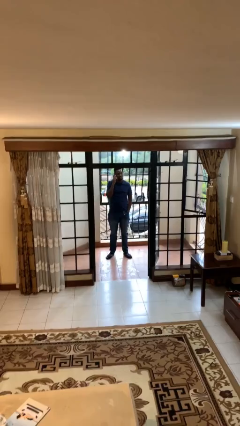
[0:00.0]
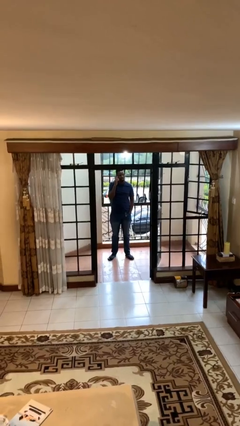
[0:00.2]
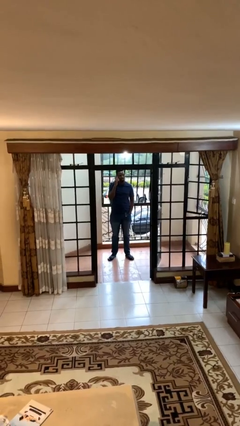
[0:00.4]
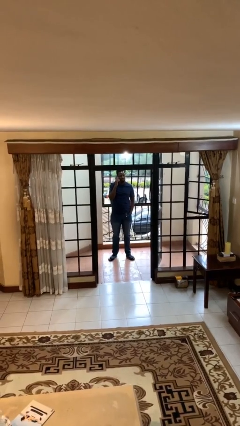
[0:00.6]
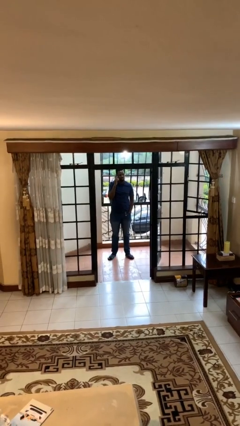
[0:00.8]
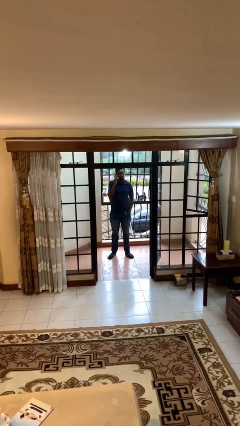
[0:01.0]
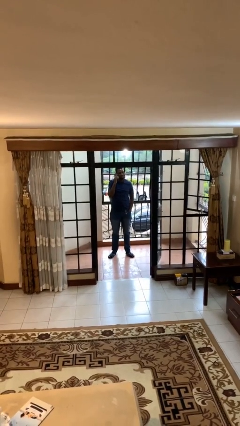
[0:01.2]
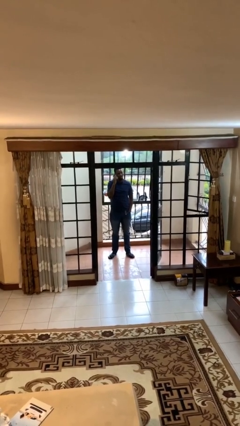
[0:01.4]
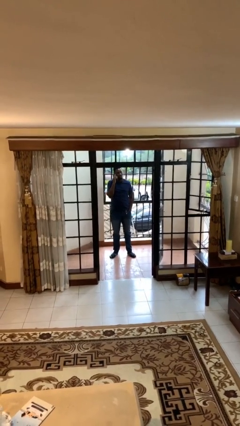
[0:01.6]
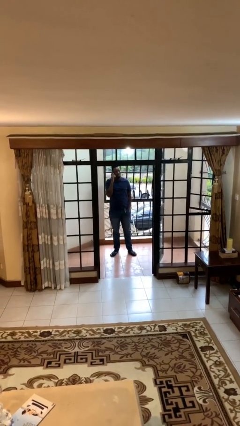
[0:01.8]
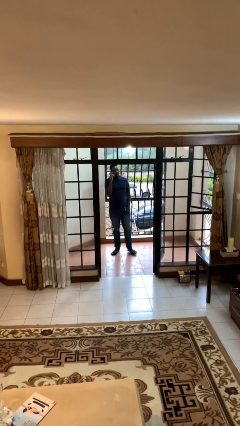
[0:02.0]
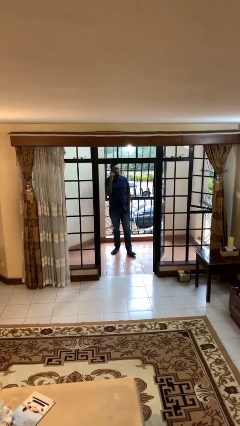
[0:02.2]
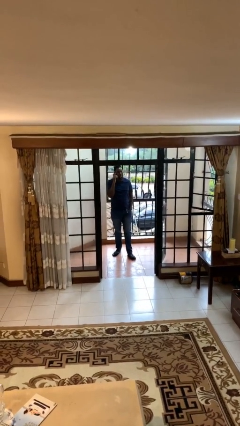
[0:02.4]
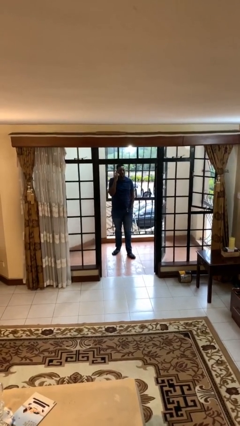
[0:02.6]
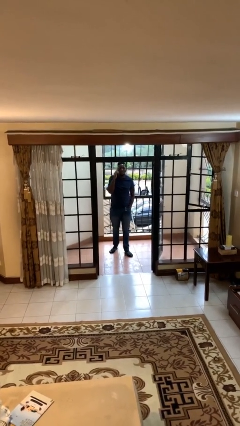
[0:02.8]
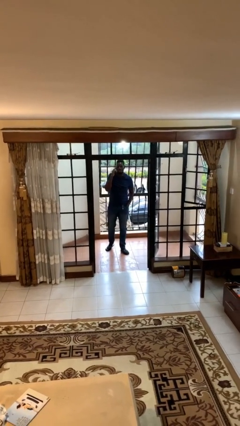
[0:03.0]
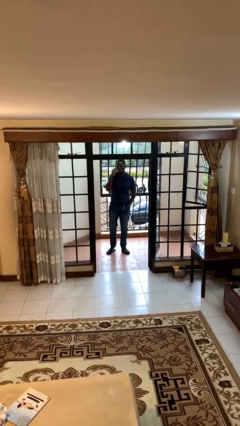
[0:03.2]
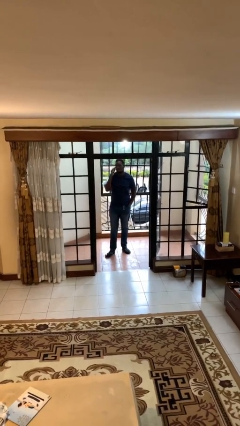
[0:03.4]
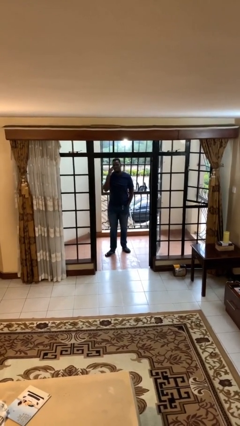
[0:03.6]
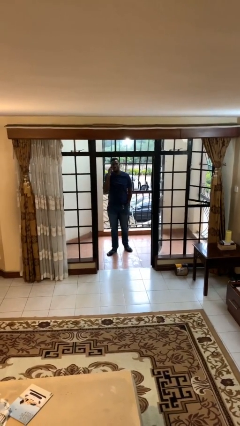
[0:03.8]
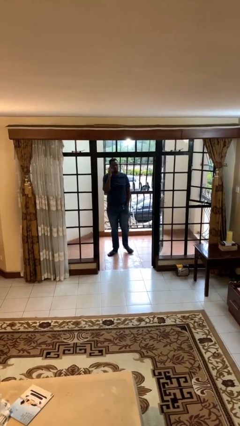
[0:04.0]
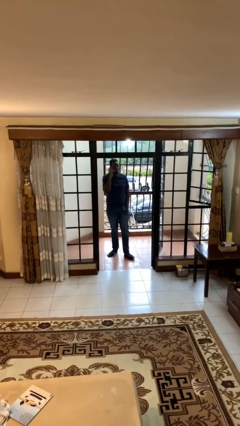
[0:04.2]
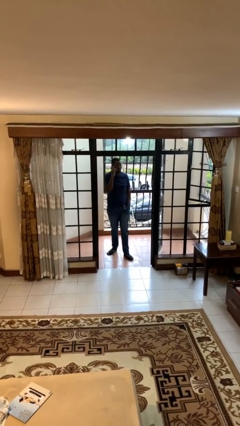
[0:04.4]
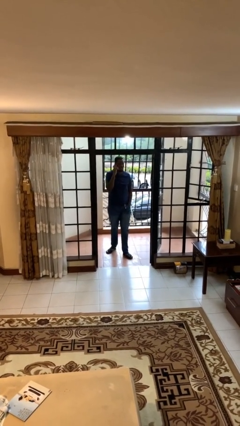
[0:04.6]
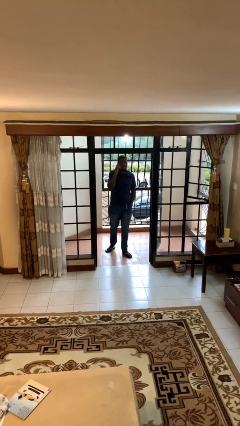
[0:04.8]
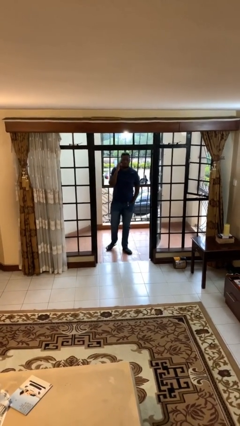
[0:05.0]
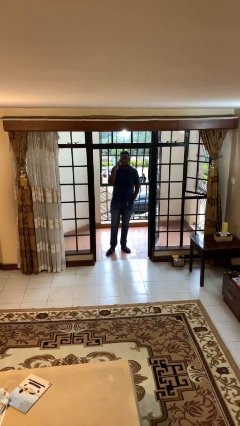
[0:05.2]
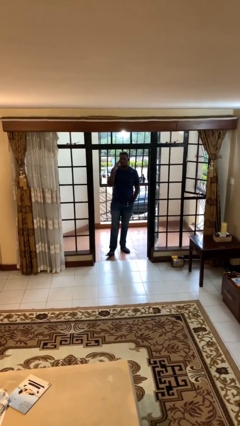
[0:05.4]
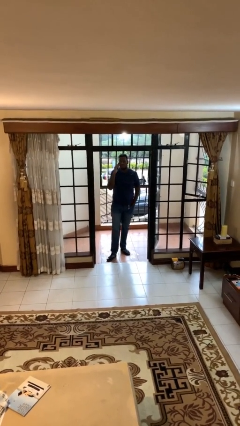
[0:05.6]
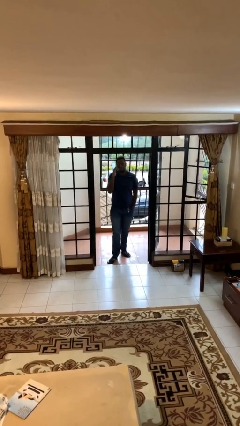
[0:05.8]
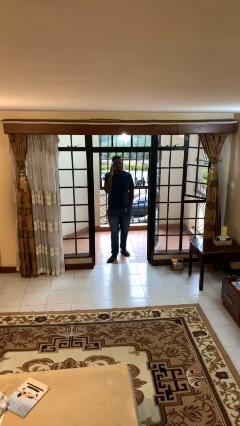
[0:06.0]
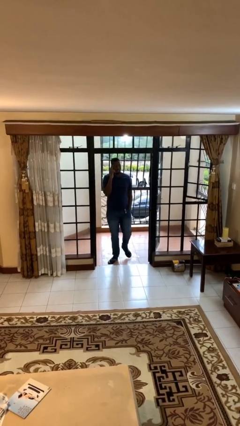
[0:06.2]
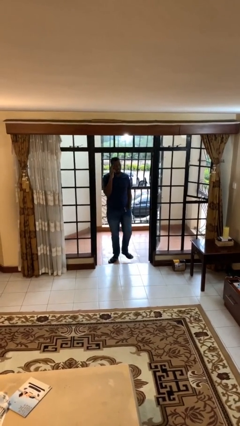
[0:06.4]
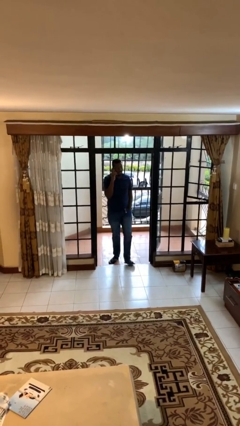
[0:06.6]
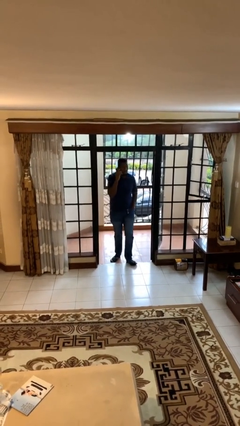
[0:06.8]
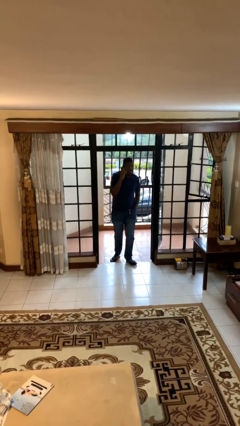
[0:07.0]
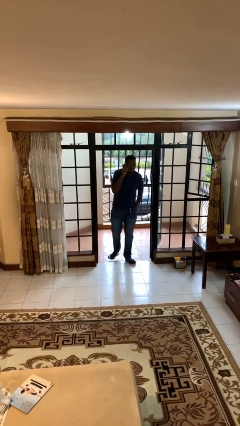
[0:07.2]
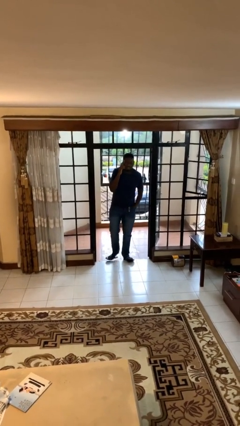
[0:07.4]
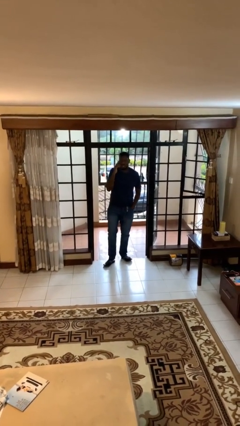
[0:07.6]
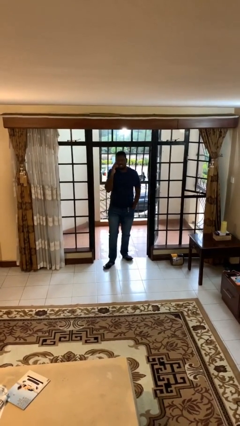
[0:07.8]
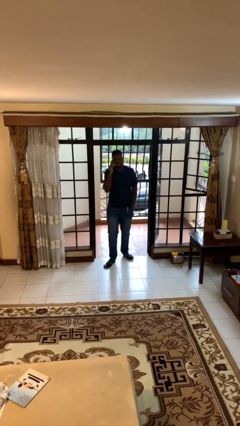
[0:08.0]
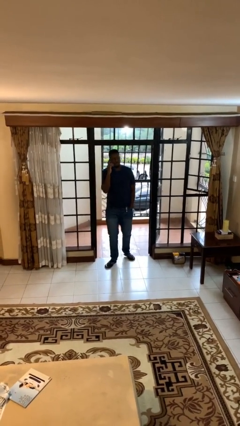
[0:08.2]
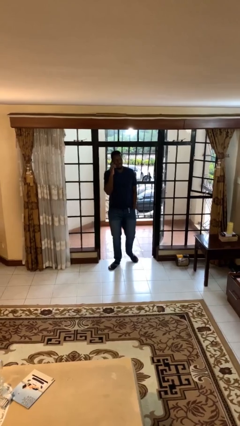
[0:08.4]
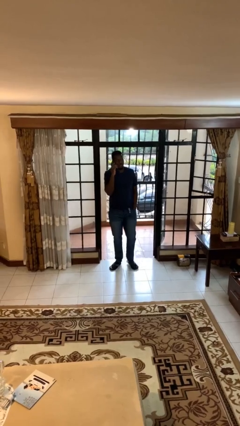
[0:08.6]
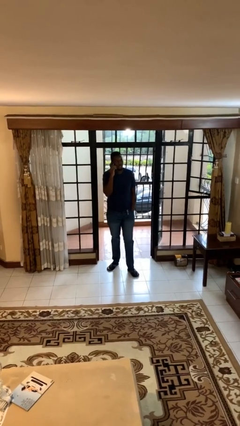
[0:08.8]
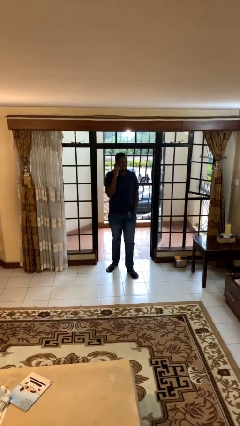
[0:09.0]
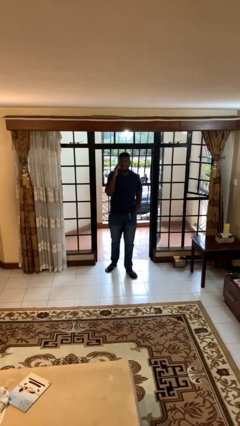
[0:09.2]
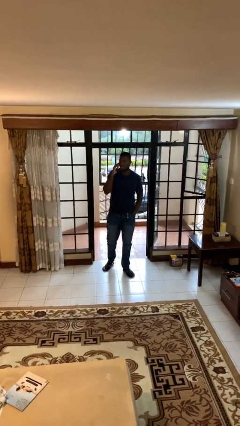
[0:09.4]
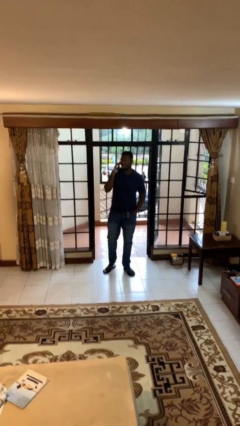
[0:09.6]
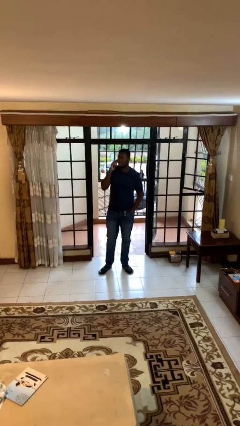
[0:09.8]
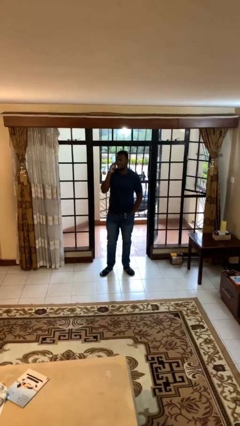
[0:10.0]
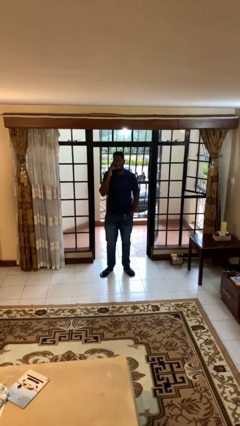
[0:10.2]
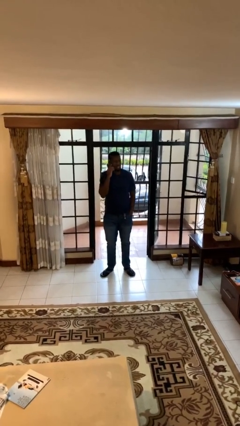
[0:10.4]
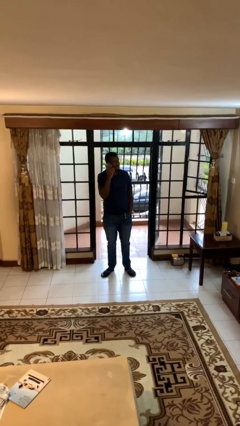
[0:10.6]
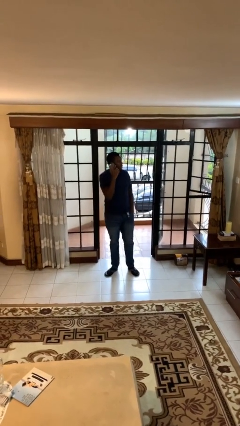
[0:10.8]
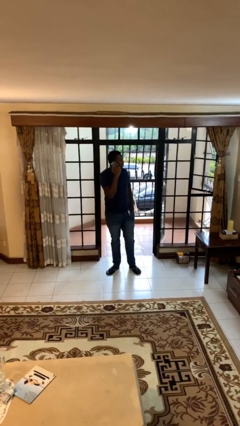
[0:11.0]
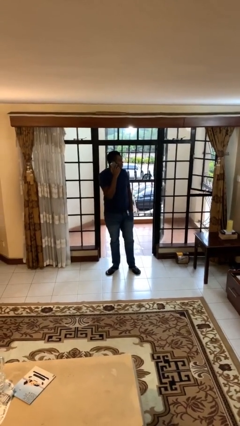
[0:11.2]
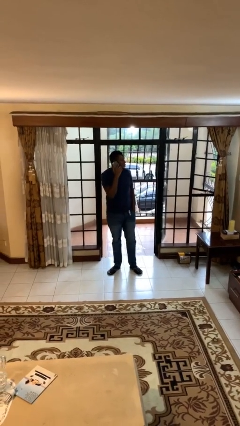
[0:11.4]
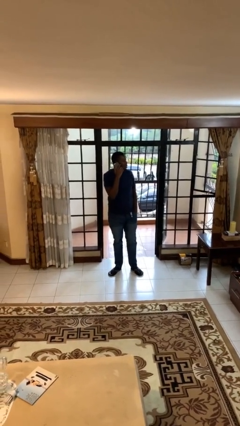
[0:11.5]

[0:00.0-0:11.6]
person enters scene through structure

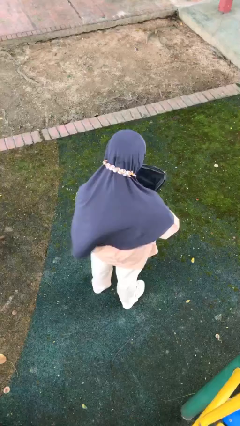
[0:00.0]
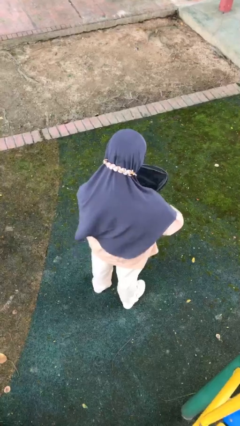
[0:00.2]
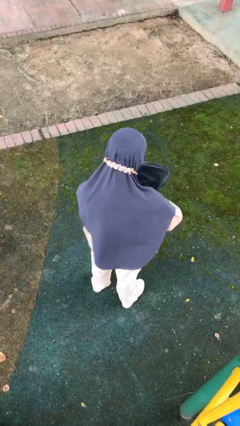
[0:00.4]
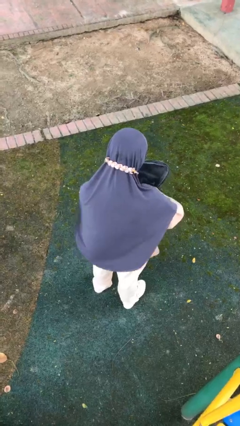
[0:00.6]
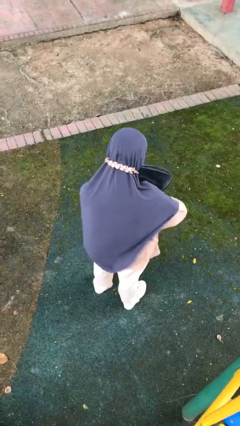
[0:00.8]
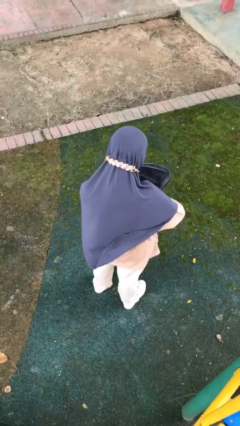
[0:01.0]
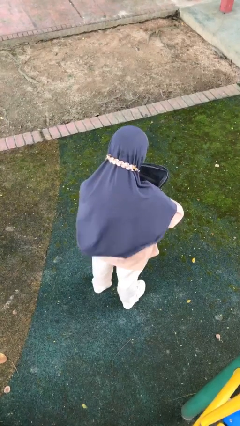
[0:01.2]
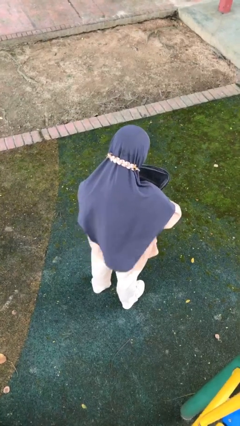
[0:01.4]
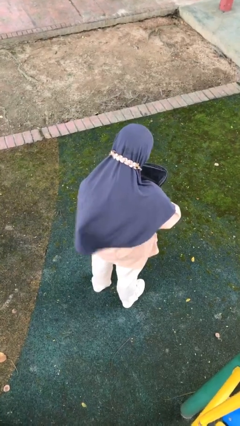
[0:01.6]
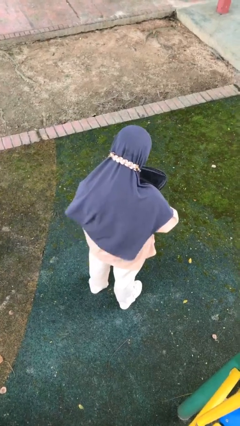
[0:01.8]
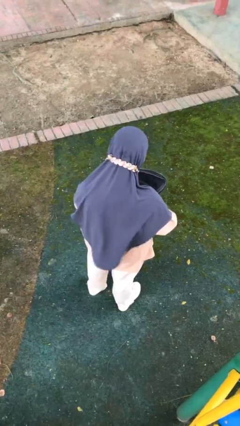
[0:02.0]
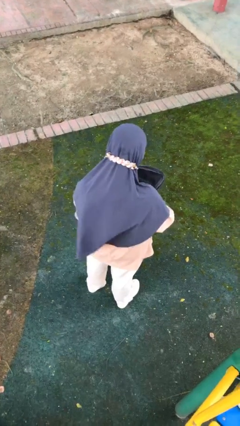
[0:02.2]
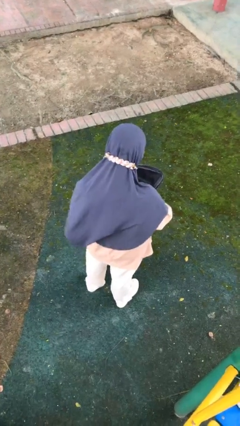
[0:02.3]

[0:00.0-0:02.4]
person searches in backpack

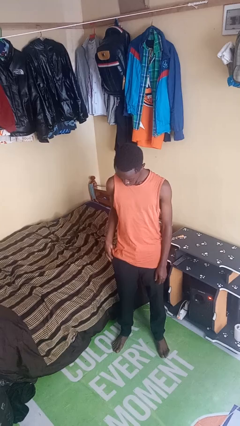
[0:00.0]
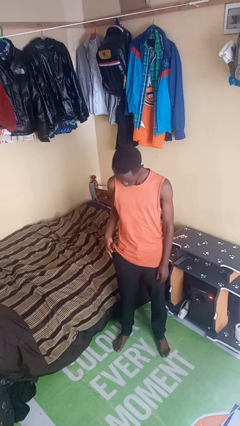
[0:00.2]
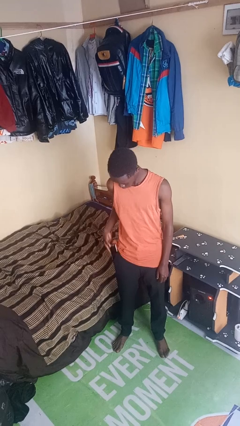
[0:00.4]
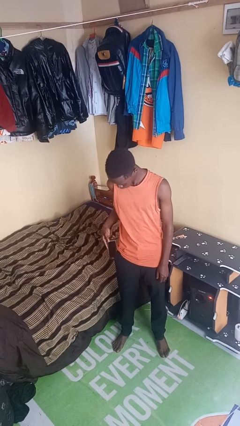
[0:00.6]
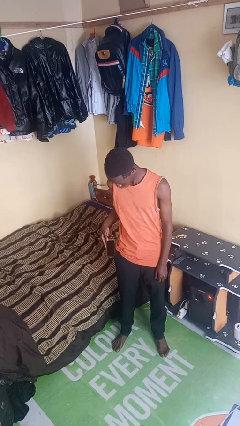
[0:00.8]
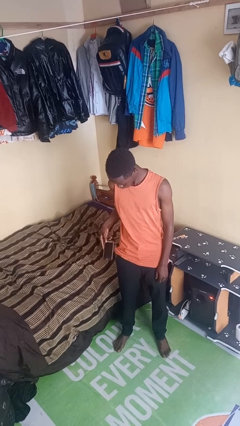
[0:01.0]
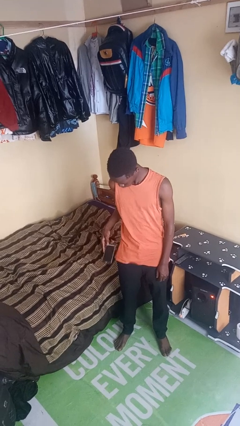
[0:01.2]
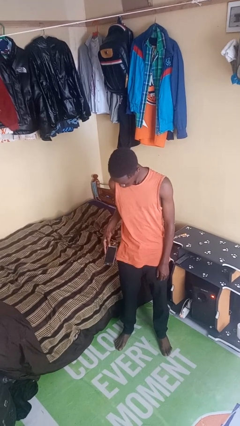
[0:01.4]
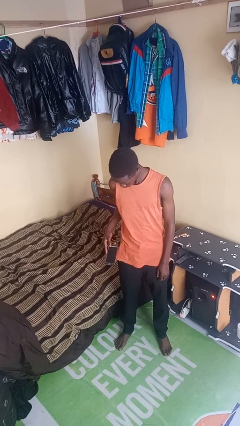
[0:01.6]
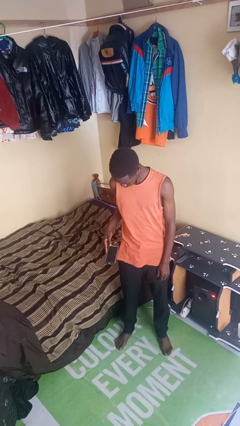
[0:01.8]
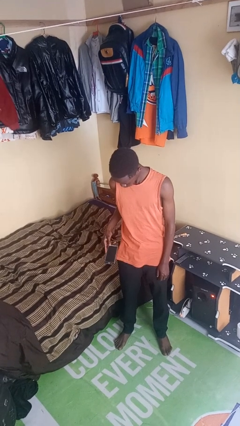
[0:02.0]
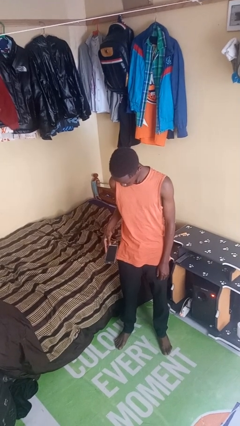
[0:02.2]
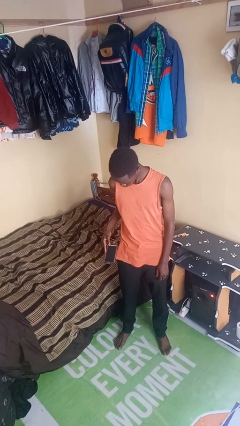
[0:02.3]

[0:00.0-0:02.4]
person takes phone from pocket

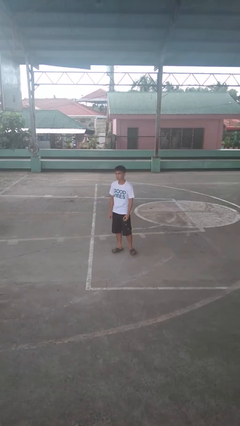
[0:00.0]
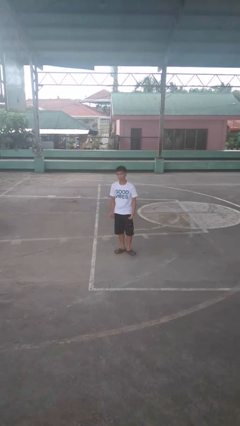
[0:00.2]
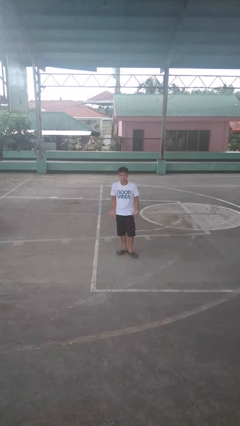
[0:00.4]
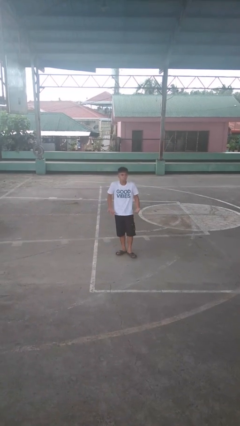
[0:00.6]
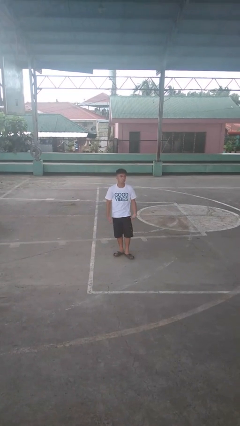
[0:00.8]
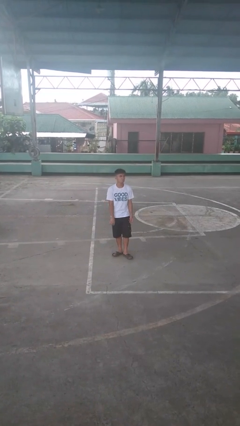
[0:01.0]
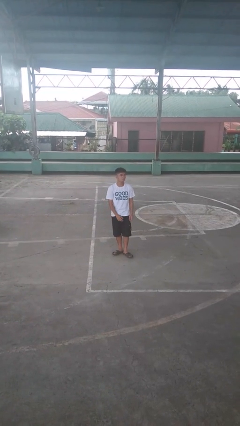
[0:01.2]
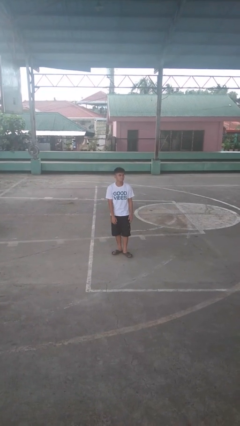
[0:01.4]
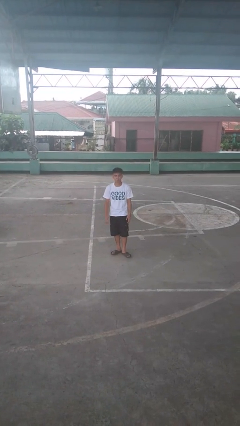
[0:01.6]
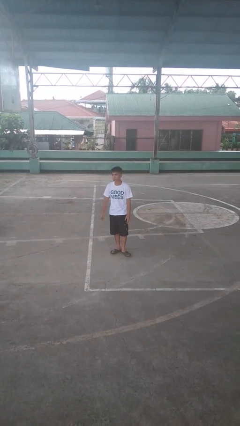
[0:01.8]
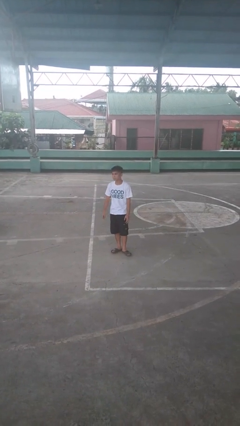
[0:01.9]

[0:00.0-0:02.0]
person shrugs
